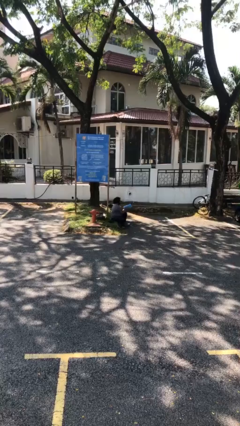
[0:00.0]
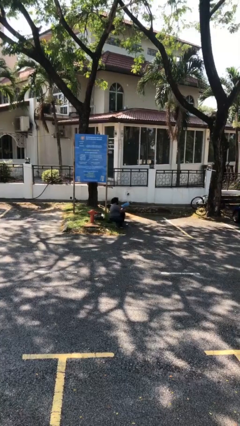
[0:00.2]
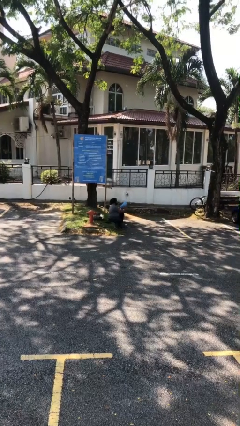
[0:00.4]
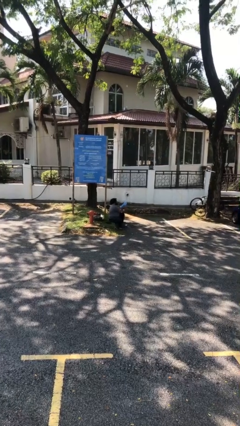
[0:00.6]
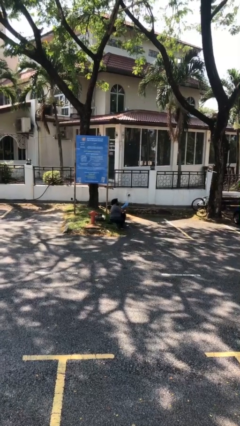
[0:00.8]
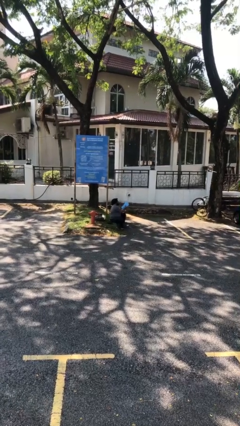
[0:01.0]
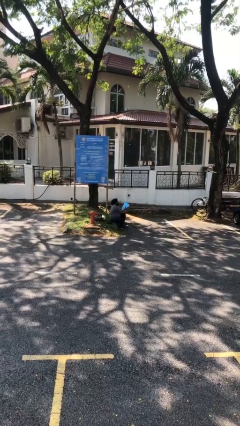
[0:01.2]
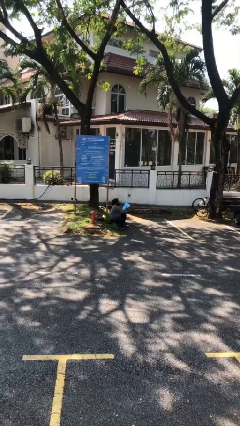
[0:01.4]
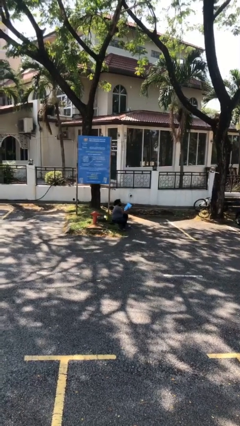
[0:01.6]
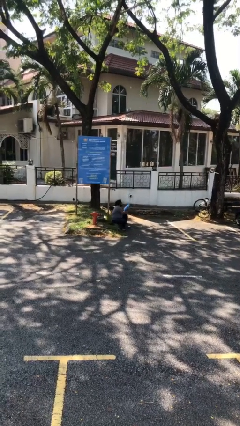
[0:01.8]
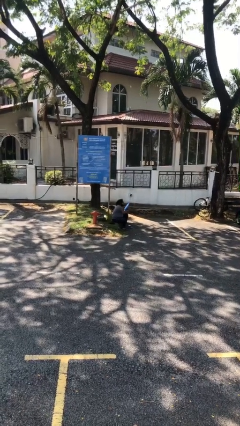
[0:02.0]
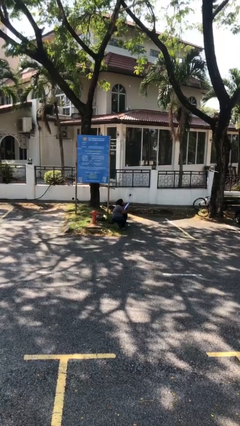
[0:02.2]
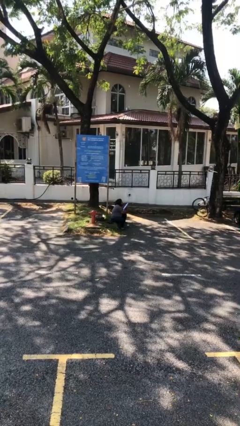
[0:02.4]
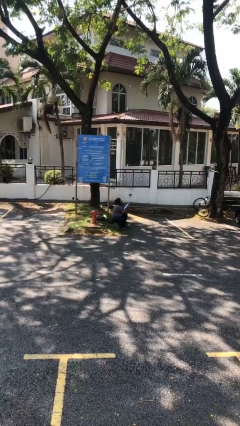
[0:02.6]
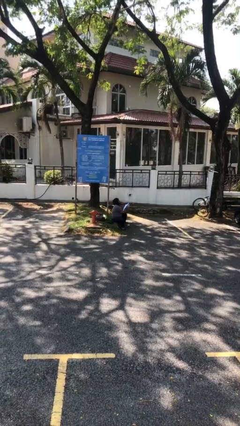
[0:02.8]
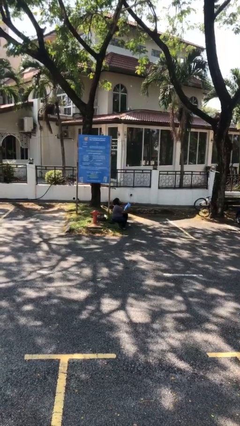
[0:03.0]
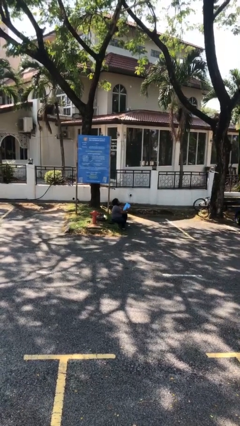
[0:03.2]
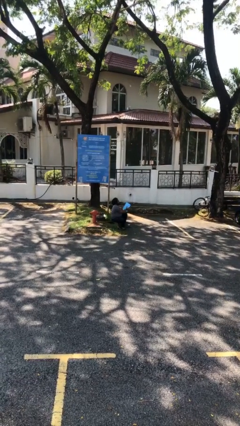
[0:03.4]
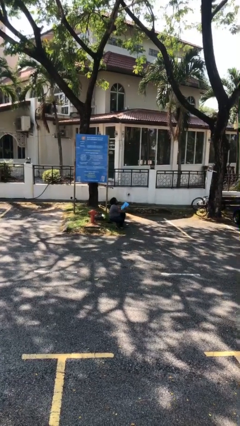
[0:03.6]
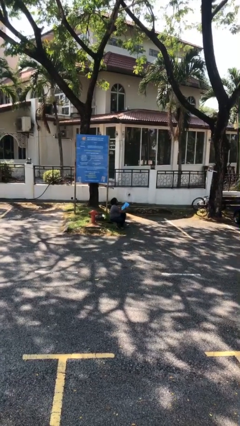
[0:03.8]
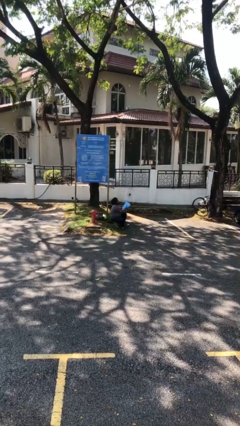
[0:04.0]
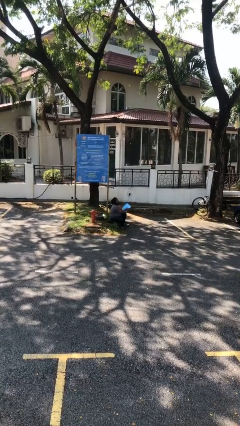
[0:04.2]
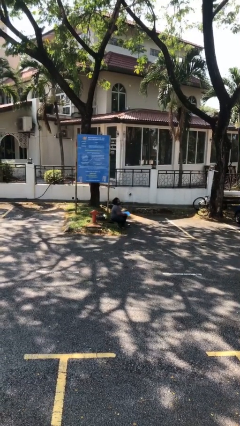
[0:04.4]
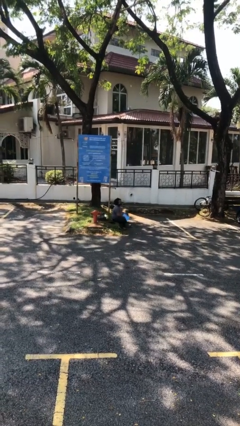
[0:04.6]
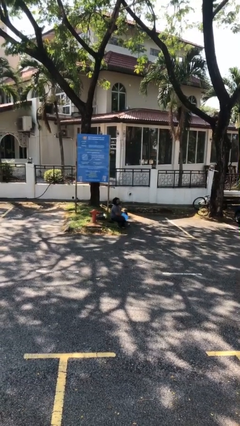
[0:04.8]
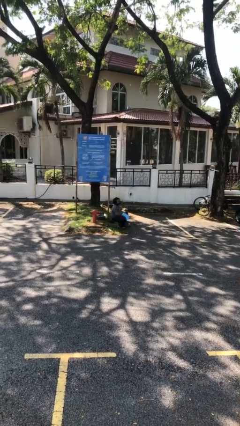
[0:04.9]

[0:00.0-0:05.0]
person reads document

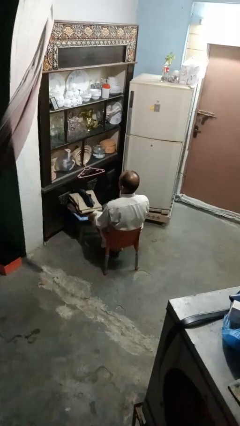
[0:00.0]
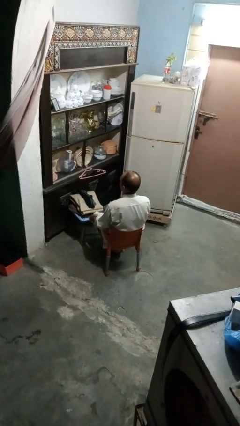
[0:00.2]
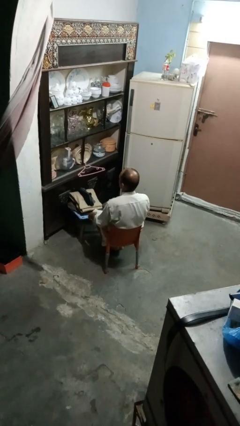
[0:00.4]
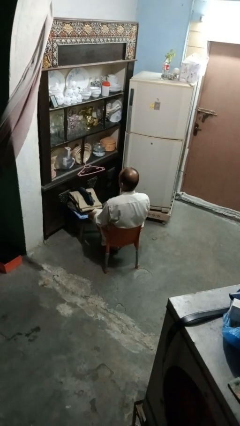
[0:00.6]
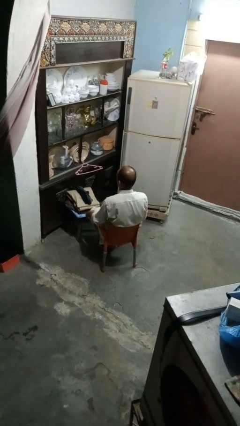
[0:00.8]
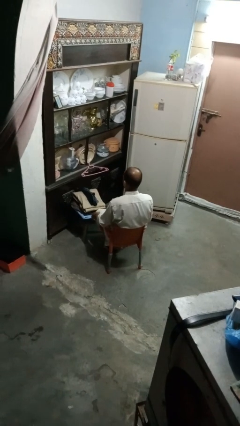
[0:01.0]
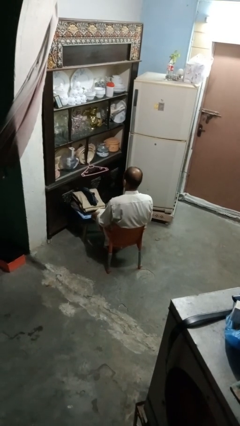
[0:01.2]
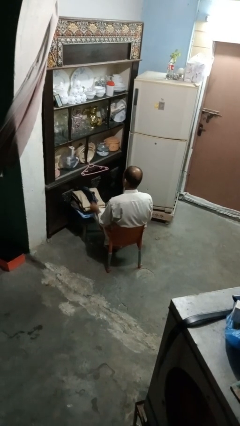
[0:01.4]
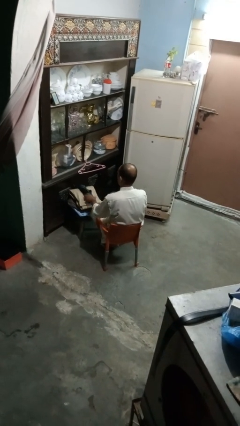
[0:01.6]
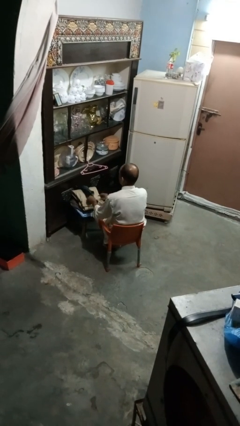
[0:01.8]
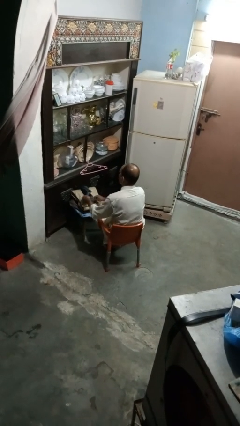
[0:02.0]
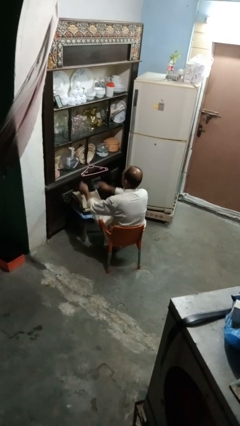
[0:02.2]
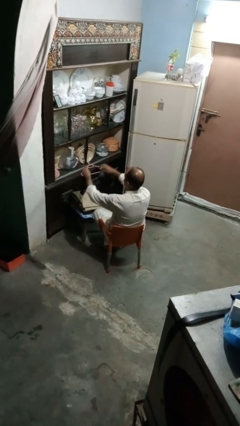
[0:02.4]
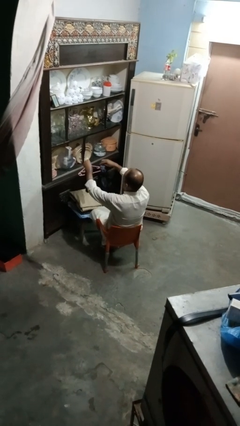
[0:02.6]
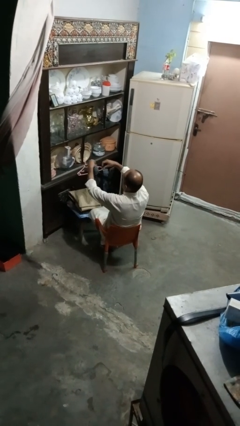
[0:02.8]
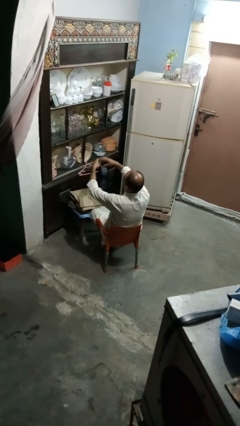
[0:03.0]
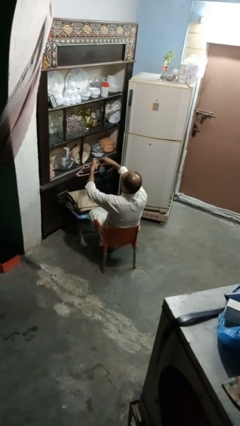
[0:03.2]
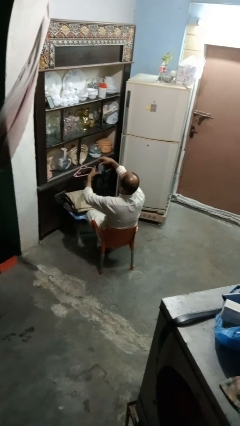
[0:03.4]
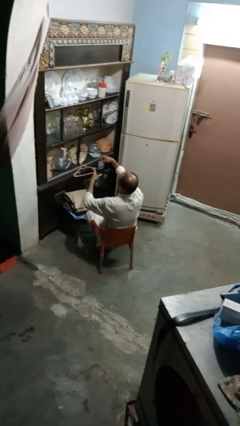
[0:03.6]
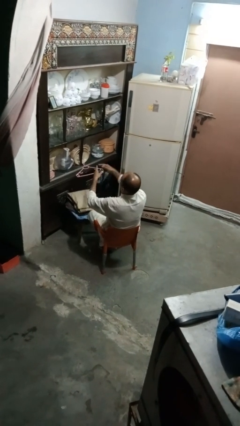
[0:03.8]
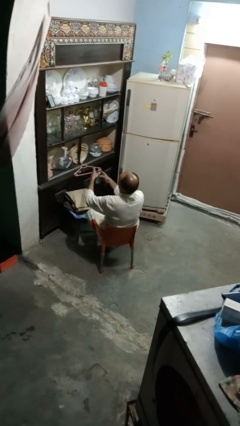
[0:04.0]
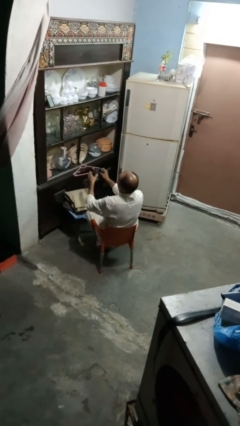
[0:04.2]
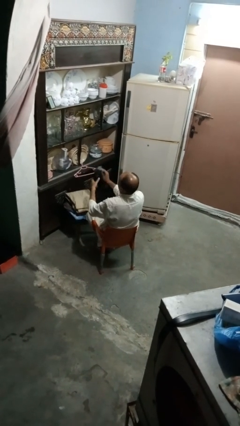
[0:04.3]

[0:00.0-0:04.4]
person folds socks

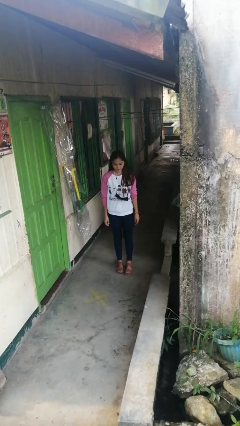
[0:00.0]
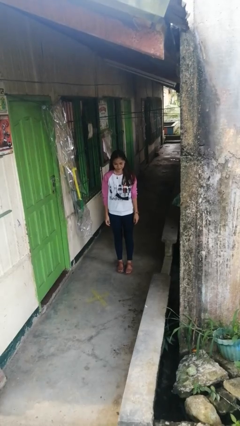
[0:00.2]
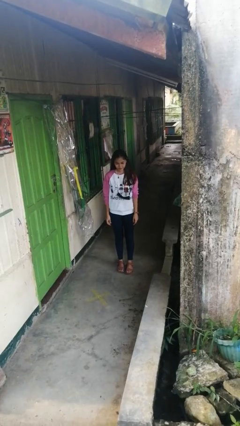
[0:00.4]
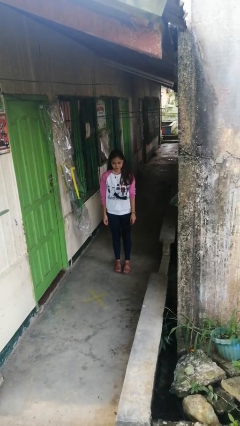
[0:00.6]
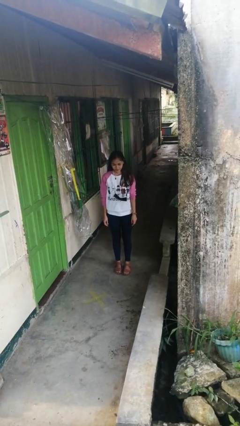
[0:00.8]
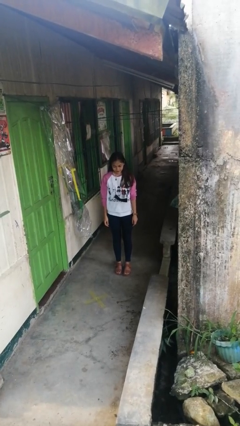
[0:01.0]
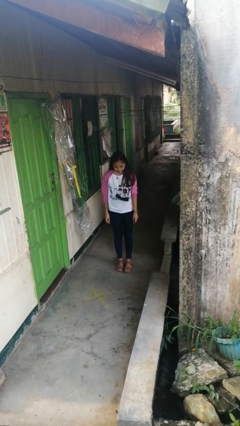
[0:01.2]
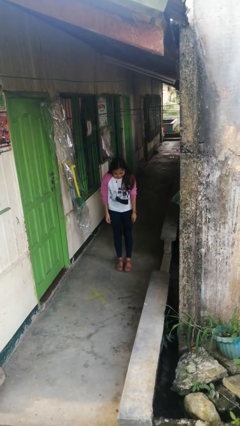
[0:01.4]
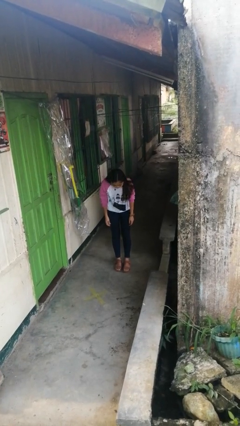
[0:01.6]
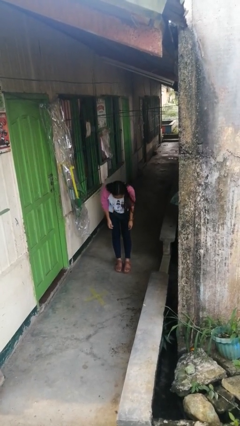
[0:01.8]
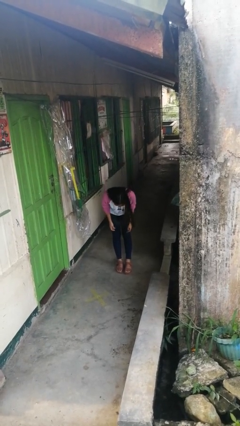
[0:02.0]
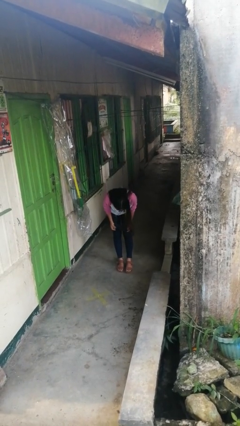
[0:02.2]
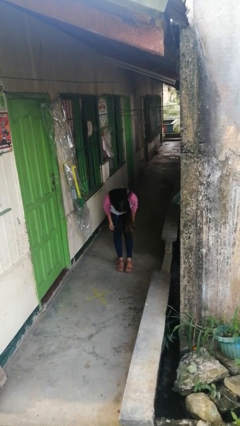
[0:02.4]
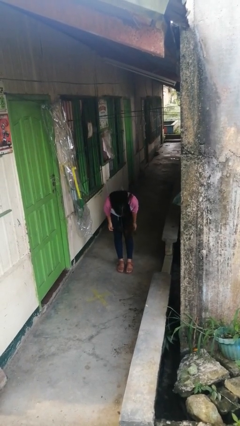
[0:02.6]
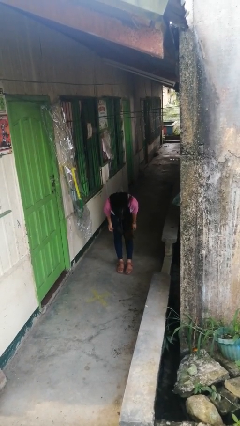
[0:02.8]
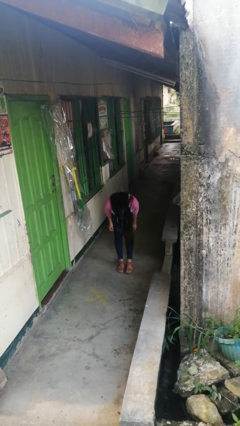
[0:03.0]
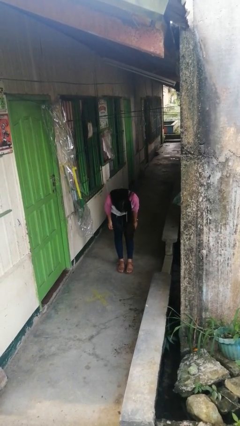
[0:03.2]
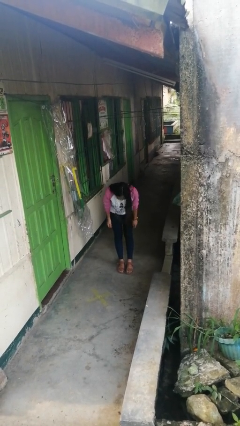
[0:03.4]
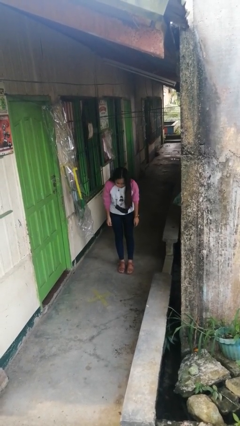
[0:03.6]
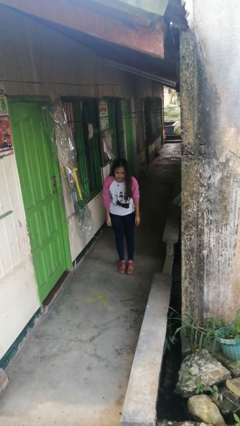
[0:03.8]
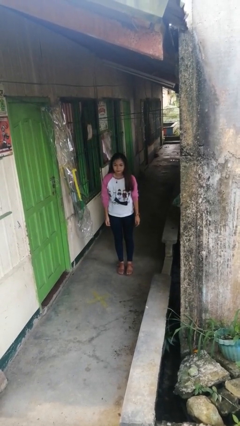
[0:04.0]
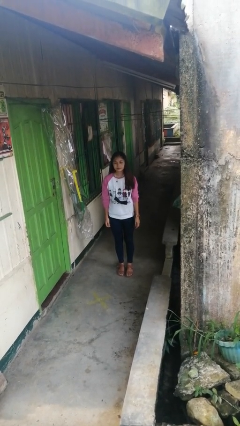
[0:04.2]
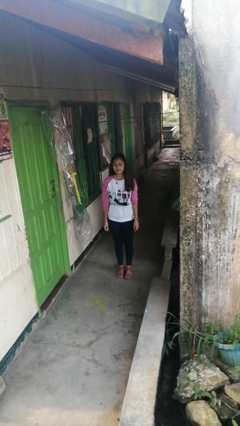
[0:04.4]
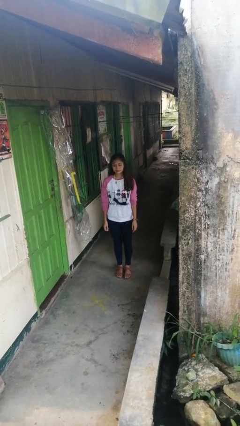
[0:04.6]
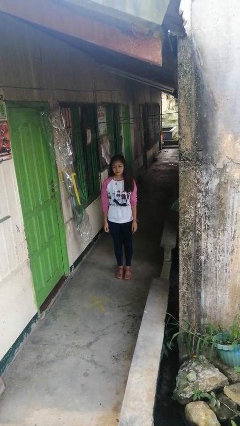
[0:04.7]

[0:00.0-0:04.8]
person bows

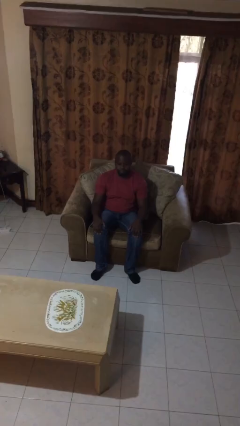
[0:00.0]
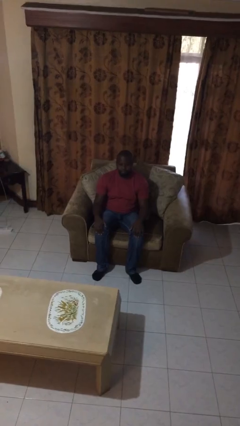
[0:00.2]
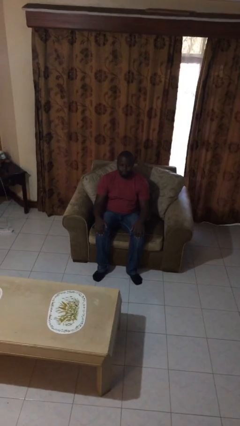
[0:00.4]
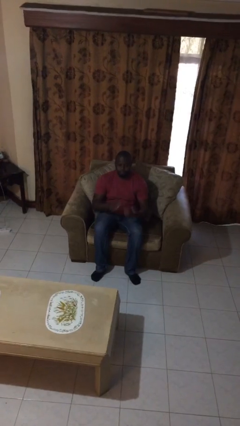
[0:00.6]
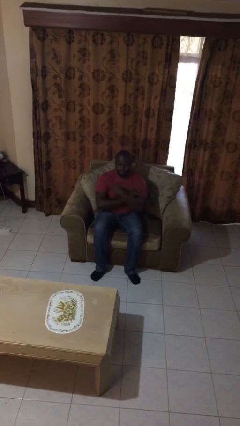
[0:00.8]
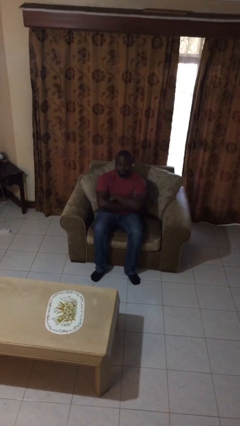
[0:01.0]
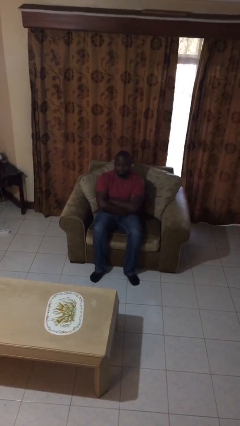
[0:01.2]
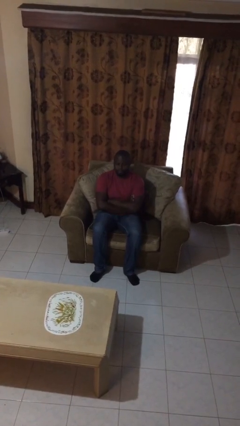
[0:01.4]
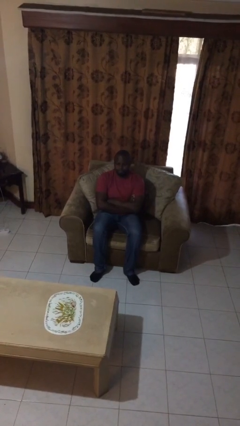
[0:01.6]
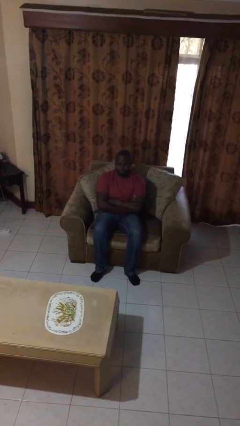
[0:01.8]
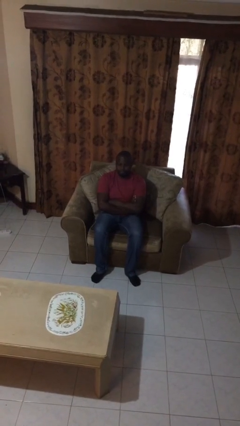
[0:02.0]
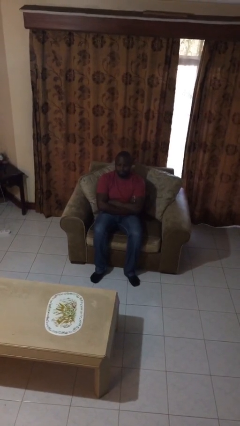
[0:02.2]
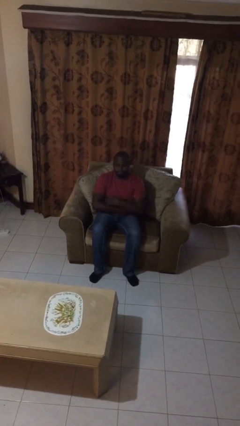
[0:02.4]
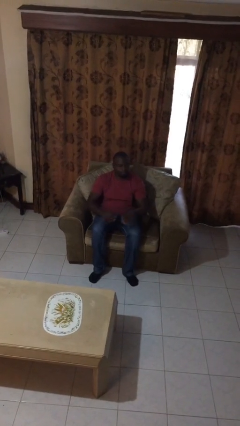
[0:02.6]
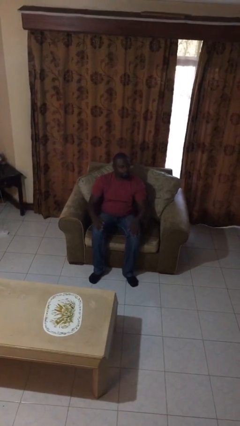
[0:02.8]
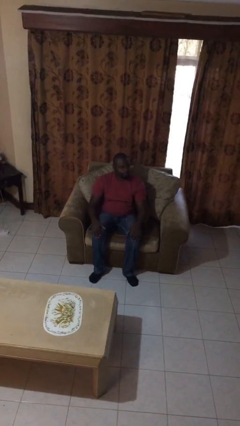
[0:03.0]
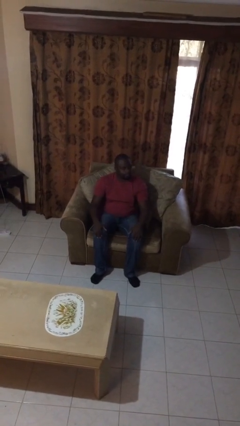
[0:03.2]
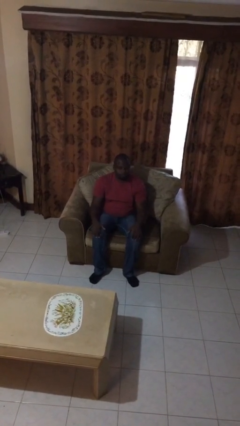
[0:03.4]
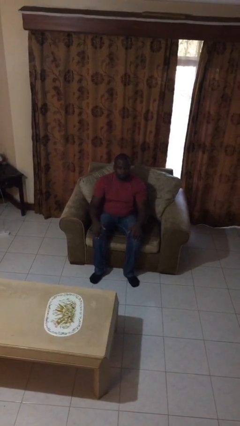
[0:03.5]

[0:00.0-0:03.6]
person crosses arms

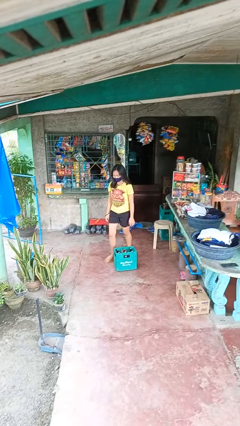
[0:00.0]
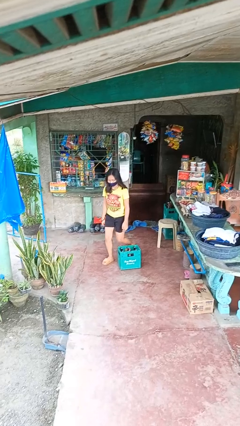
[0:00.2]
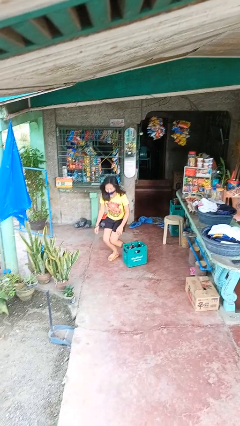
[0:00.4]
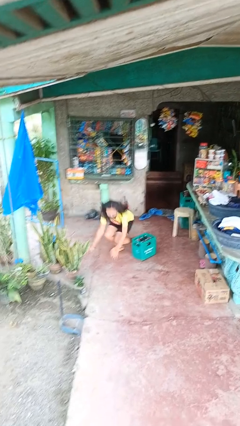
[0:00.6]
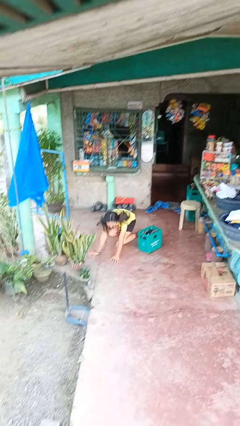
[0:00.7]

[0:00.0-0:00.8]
person trips on object on floor
